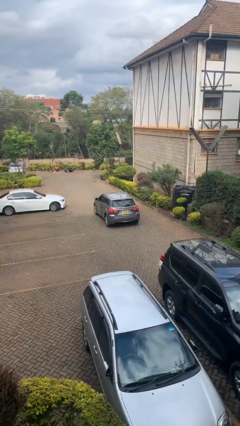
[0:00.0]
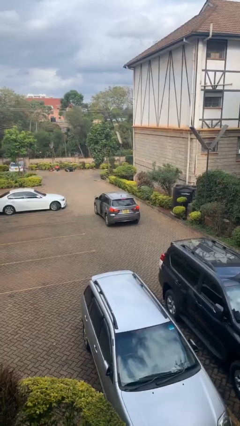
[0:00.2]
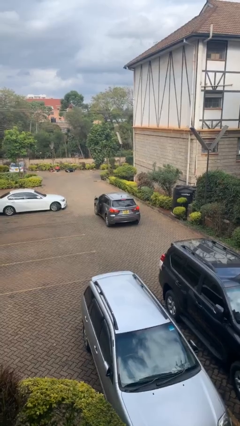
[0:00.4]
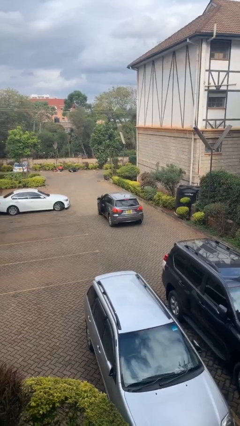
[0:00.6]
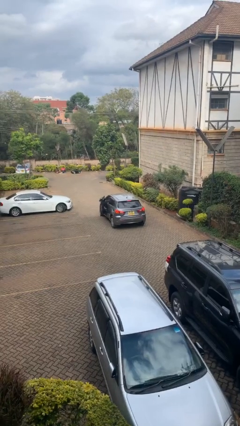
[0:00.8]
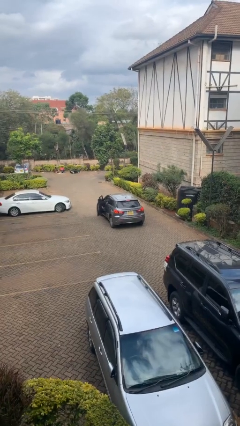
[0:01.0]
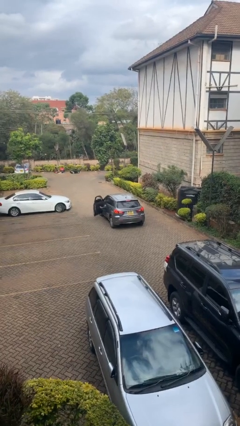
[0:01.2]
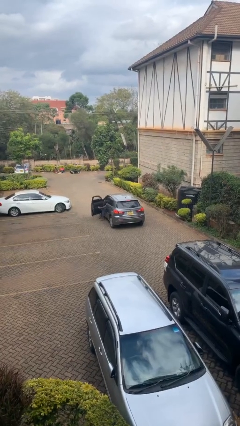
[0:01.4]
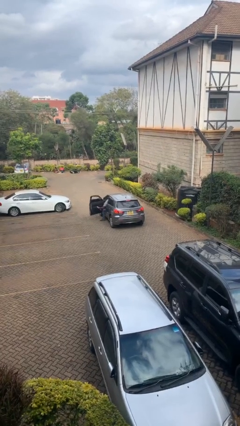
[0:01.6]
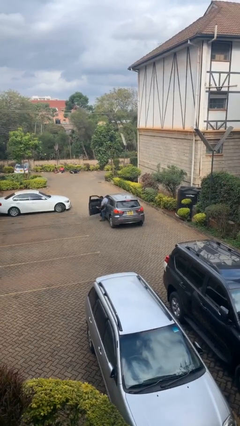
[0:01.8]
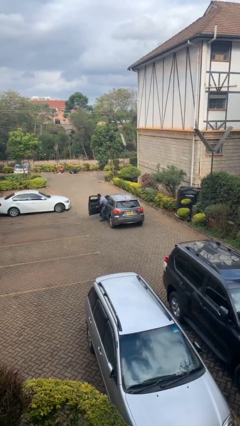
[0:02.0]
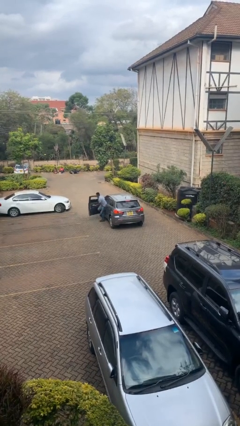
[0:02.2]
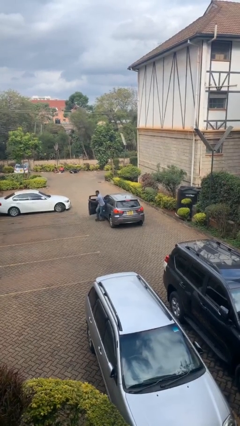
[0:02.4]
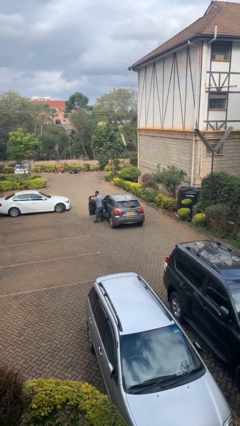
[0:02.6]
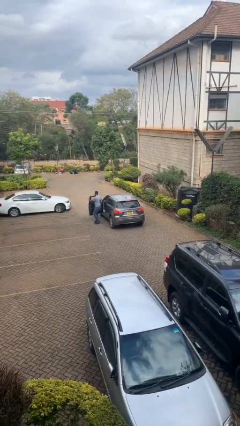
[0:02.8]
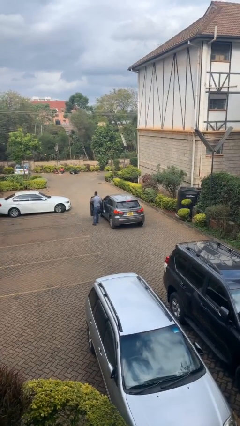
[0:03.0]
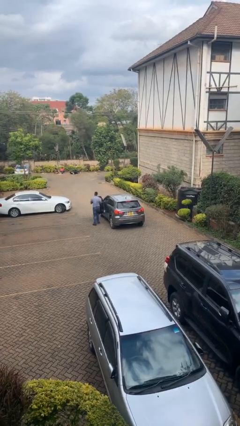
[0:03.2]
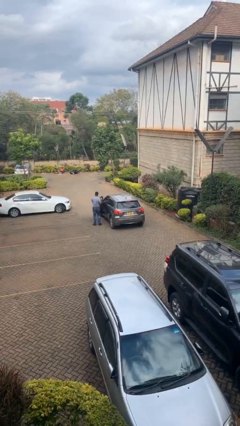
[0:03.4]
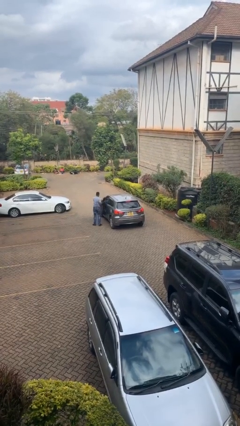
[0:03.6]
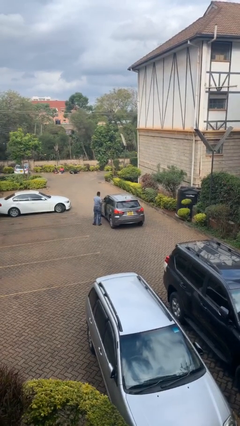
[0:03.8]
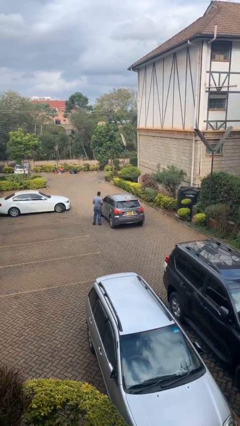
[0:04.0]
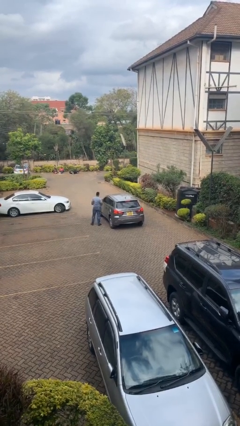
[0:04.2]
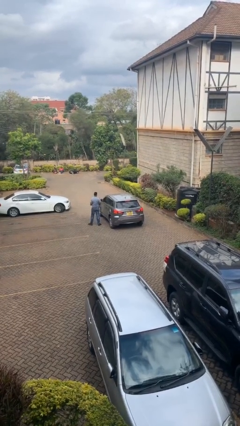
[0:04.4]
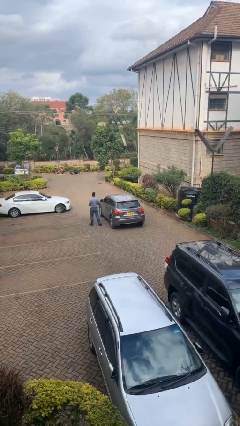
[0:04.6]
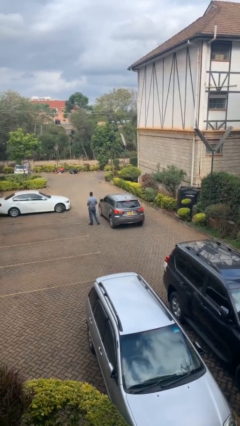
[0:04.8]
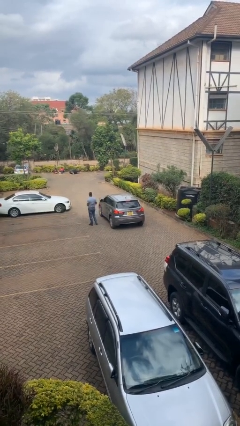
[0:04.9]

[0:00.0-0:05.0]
car drops off person

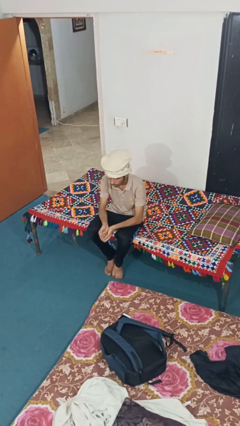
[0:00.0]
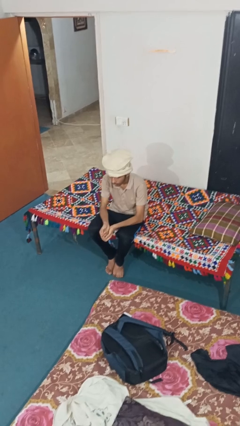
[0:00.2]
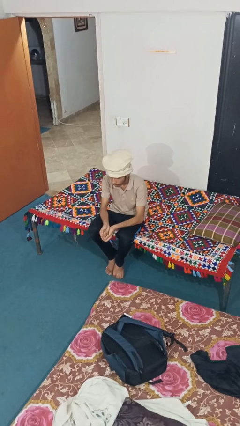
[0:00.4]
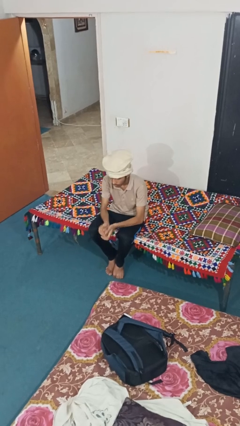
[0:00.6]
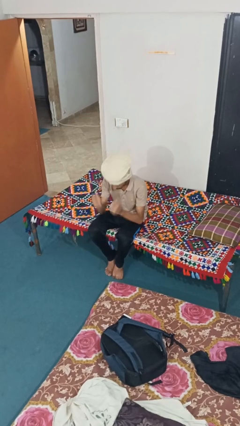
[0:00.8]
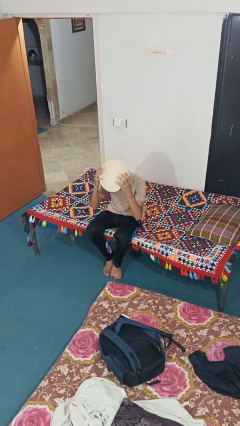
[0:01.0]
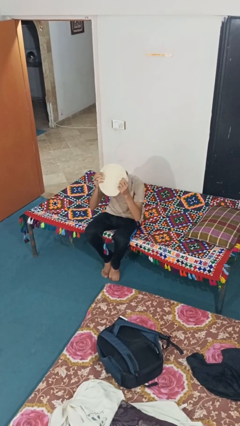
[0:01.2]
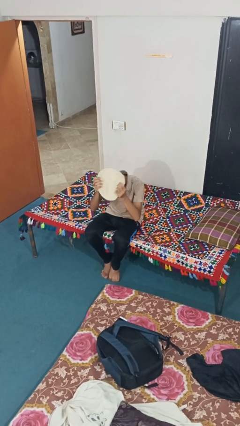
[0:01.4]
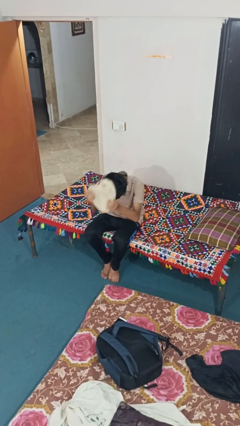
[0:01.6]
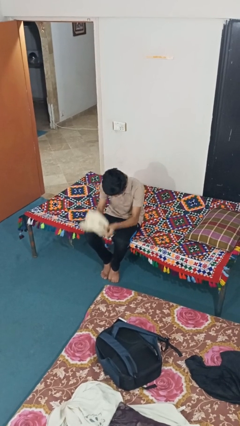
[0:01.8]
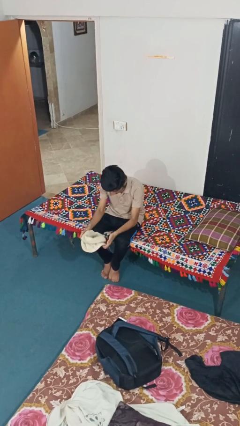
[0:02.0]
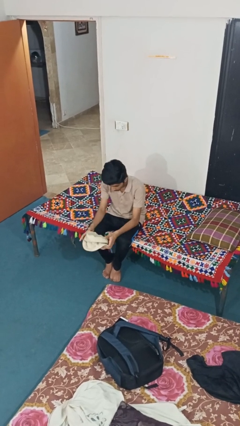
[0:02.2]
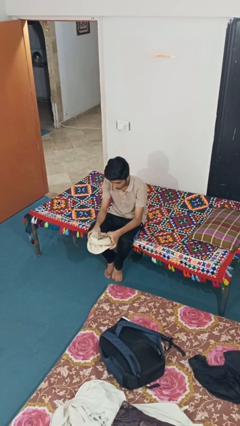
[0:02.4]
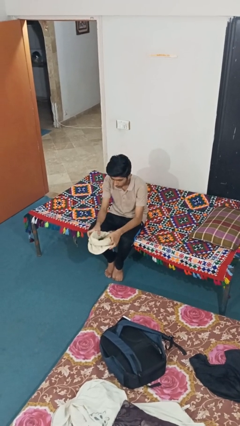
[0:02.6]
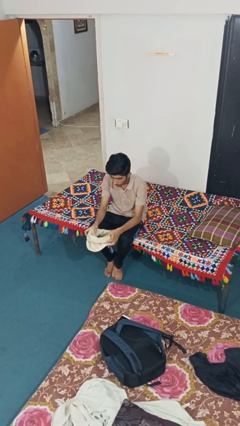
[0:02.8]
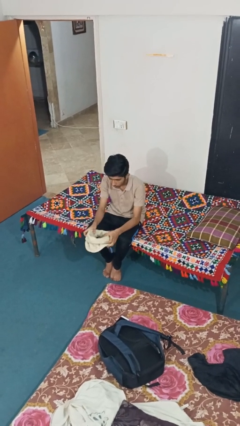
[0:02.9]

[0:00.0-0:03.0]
person takes off hat

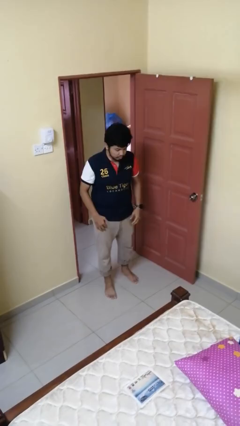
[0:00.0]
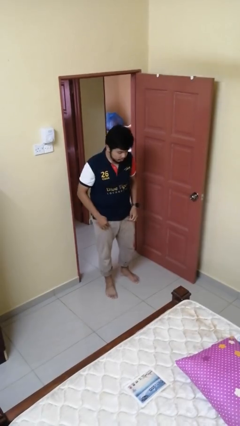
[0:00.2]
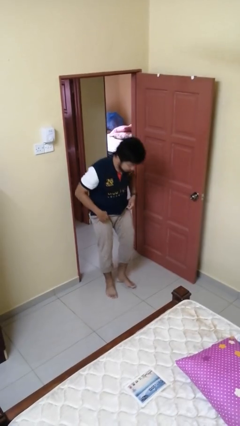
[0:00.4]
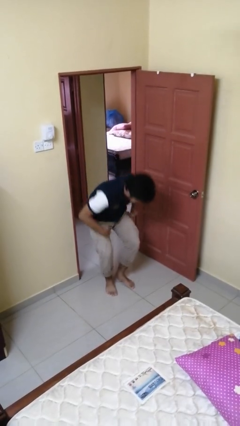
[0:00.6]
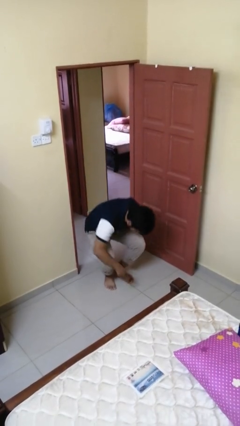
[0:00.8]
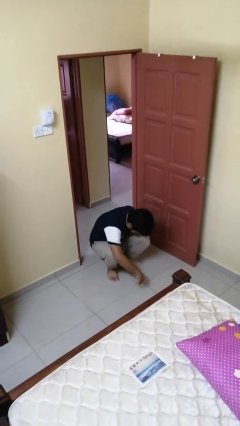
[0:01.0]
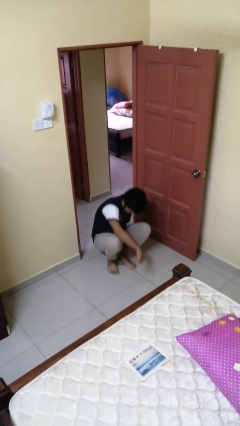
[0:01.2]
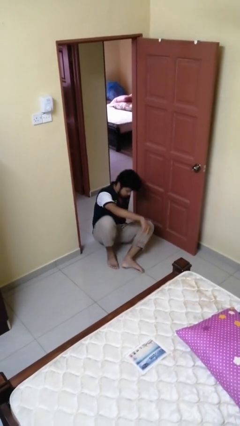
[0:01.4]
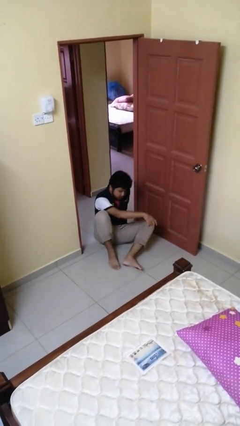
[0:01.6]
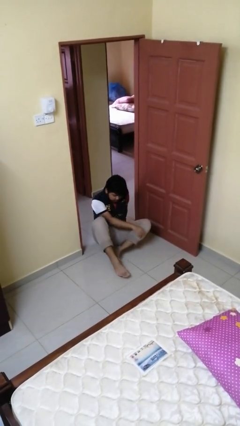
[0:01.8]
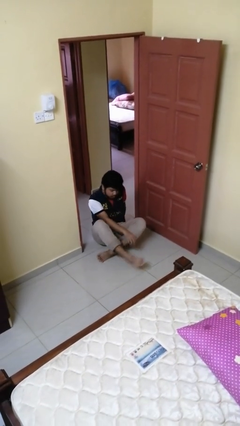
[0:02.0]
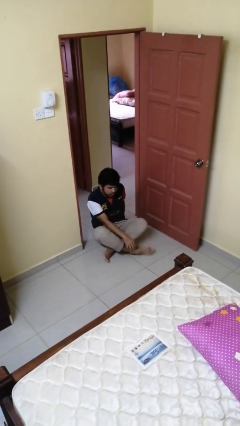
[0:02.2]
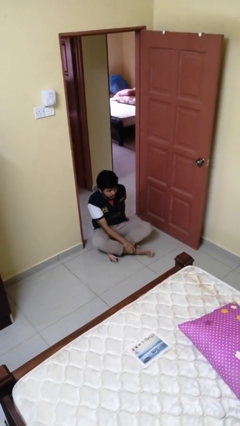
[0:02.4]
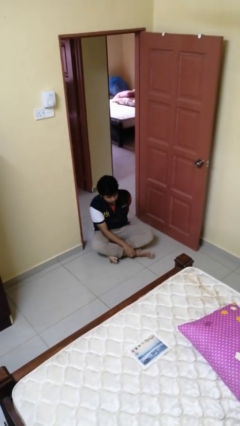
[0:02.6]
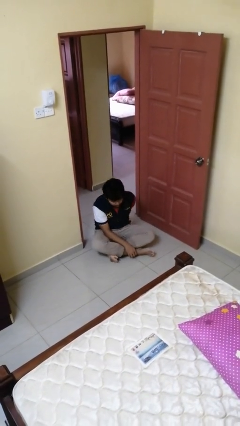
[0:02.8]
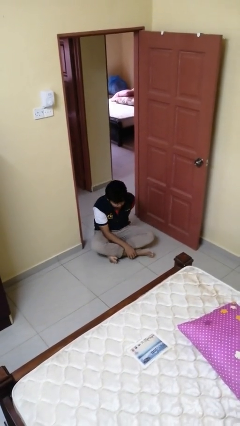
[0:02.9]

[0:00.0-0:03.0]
person sits crisscross

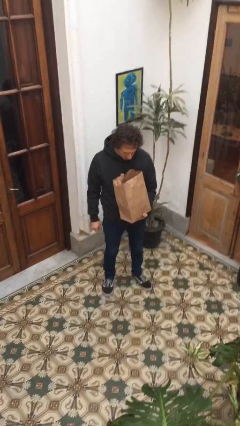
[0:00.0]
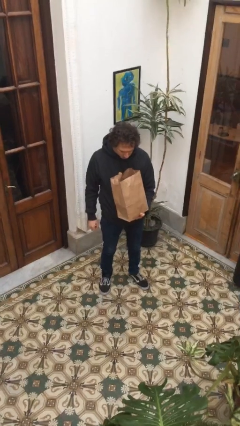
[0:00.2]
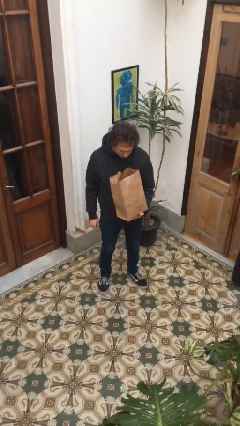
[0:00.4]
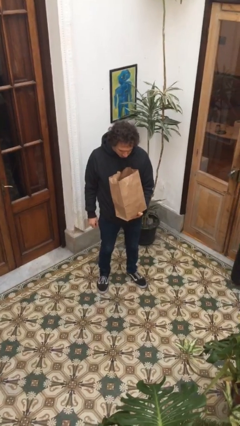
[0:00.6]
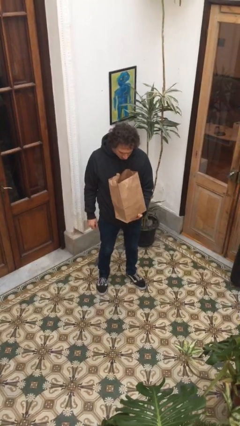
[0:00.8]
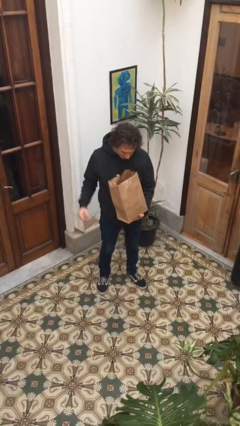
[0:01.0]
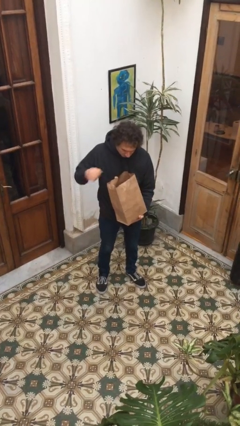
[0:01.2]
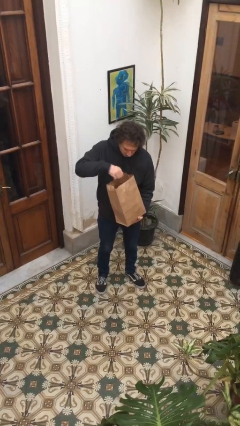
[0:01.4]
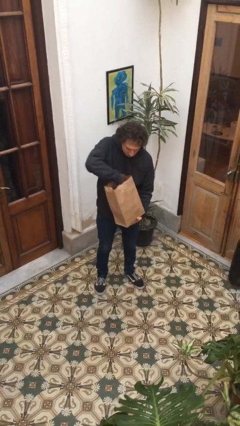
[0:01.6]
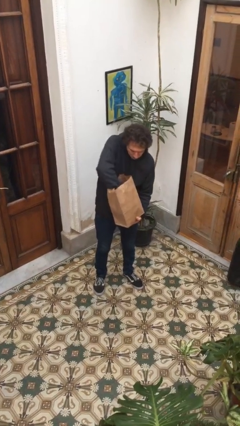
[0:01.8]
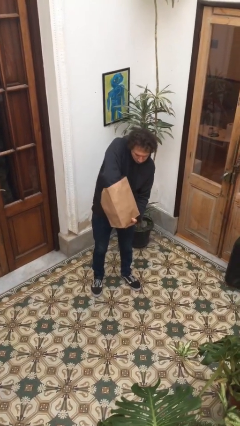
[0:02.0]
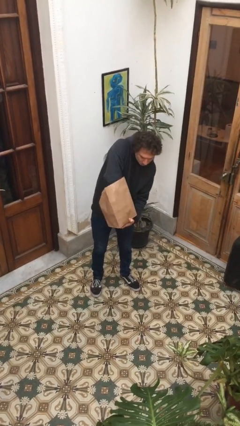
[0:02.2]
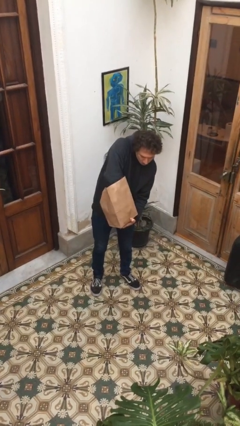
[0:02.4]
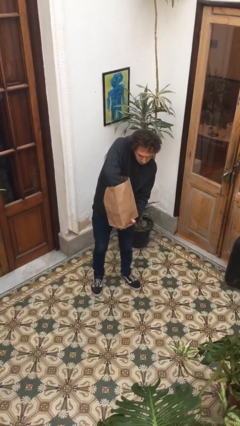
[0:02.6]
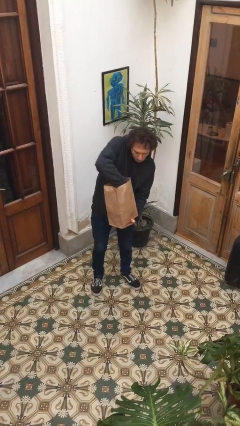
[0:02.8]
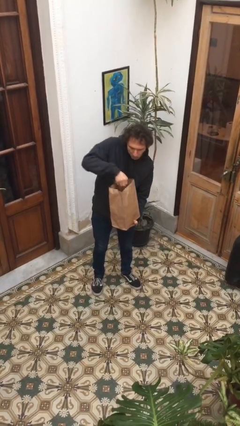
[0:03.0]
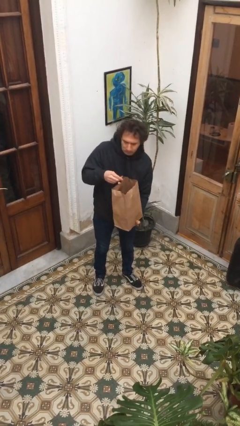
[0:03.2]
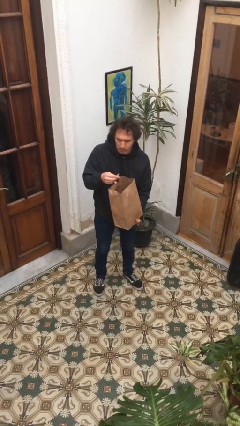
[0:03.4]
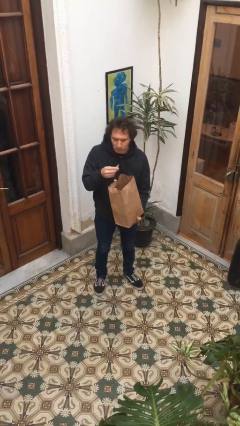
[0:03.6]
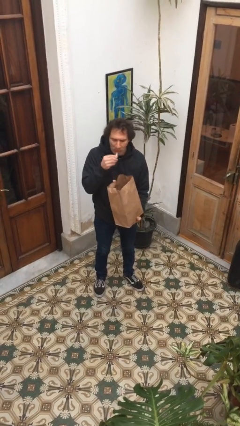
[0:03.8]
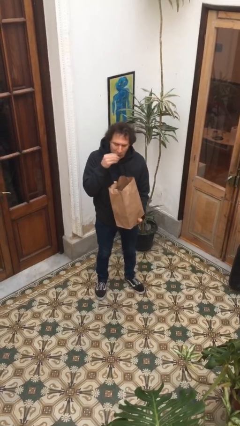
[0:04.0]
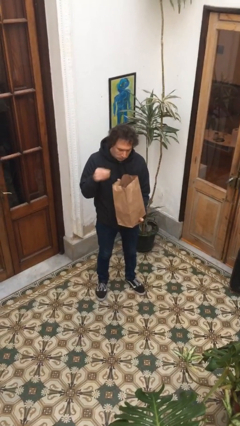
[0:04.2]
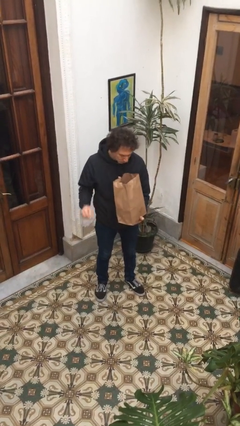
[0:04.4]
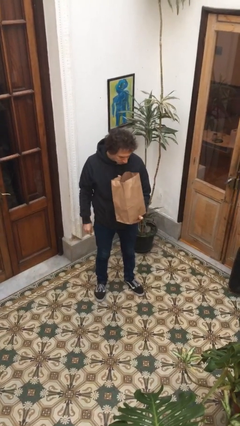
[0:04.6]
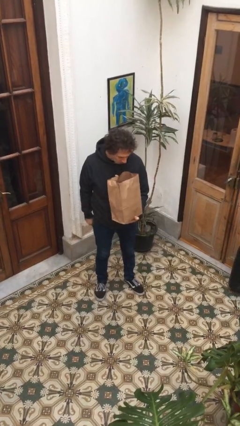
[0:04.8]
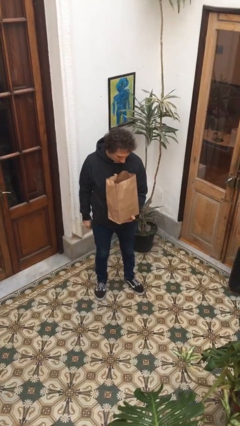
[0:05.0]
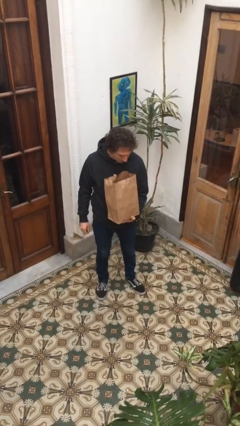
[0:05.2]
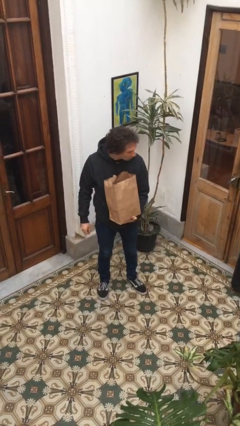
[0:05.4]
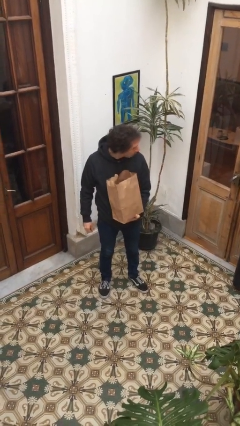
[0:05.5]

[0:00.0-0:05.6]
person eats snack from bag

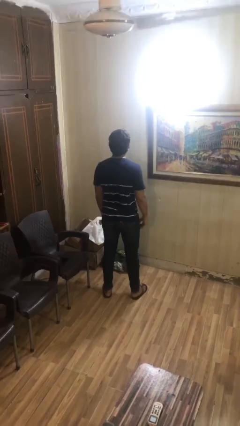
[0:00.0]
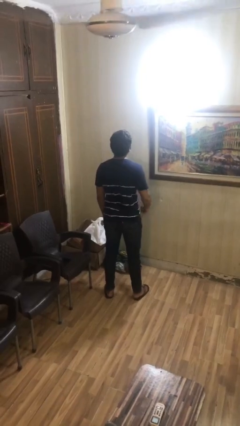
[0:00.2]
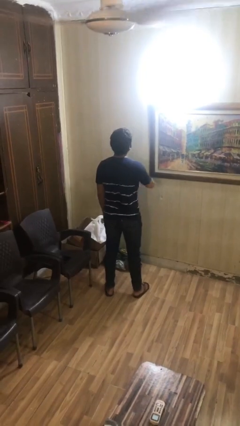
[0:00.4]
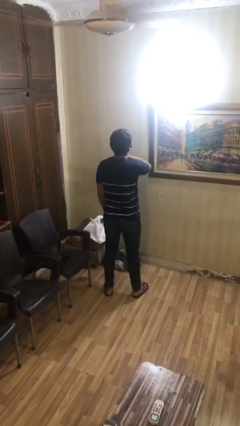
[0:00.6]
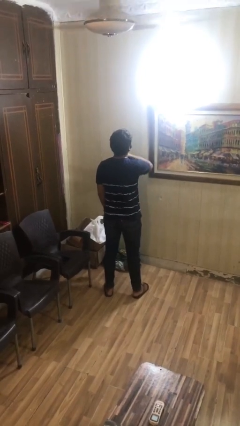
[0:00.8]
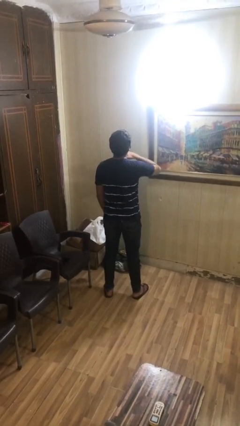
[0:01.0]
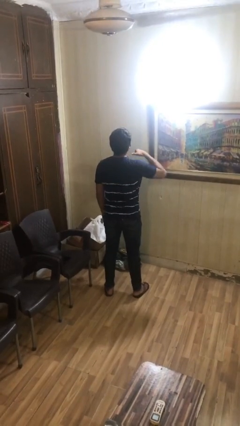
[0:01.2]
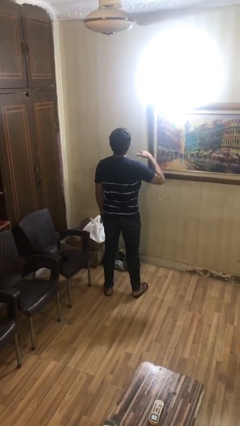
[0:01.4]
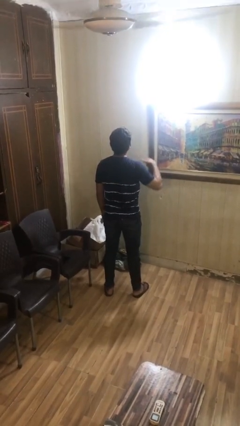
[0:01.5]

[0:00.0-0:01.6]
person gestures cut
